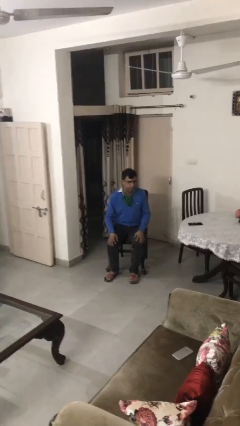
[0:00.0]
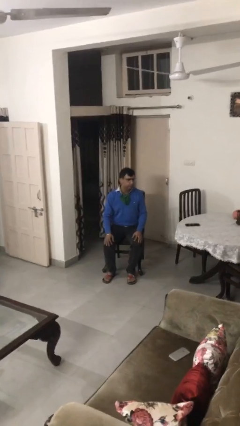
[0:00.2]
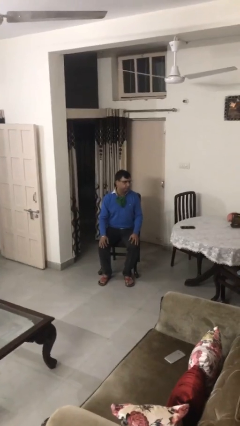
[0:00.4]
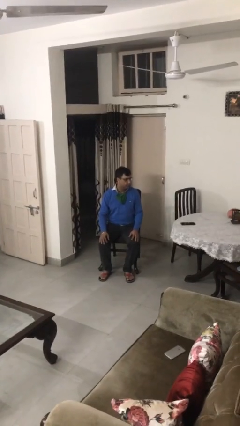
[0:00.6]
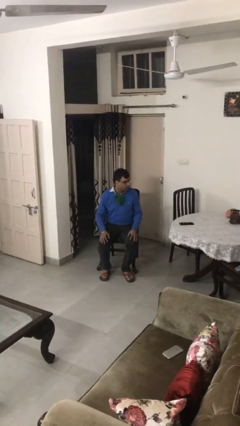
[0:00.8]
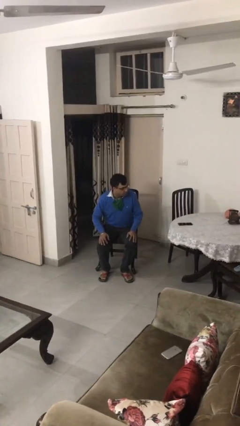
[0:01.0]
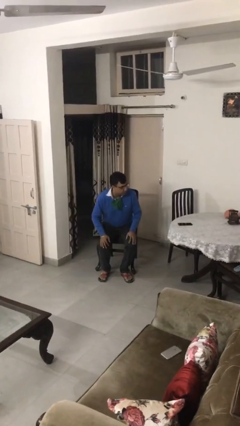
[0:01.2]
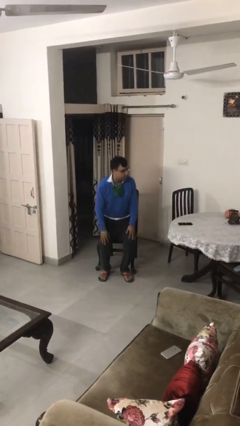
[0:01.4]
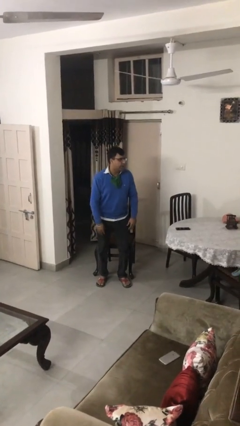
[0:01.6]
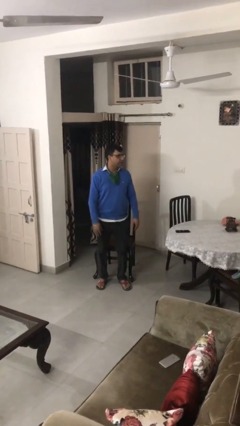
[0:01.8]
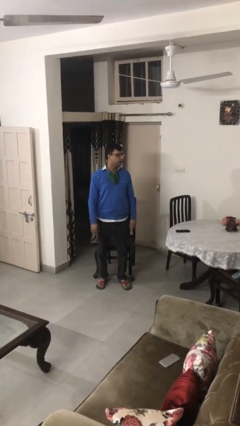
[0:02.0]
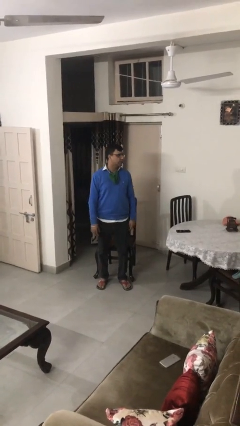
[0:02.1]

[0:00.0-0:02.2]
person stands up

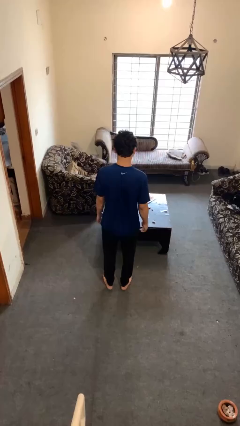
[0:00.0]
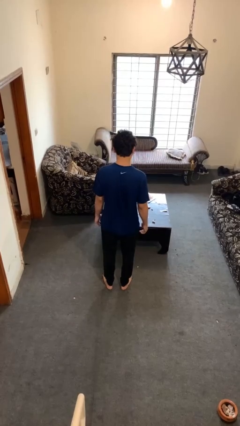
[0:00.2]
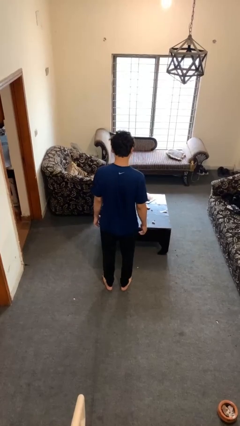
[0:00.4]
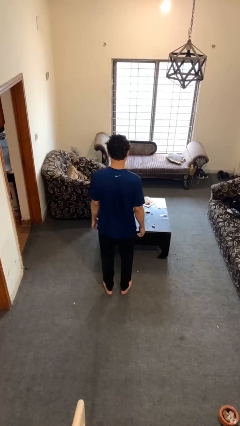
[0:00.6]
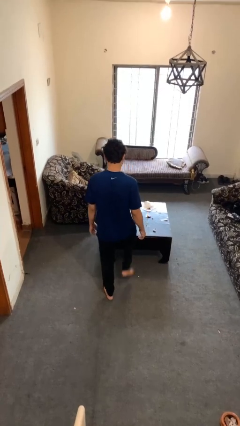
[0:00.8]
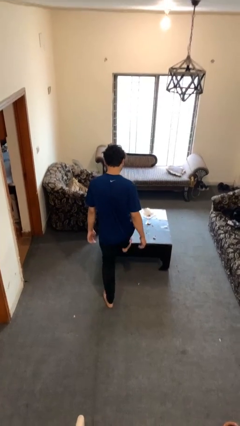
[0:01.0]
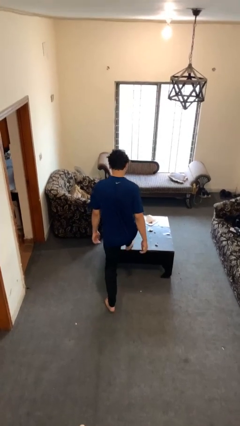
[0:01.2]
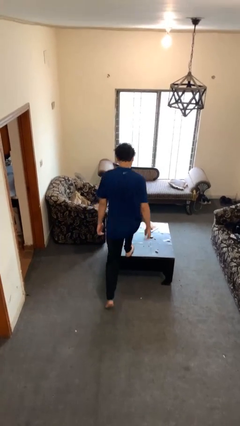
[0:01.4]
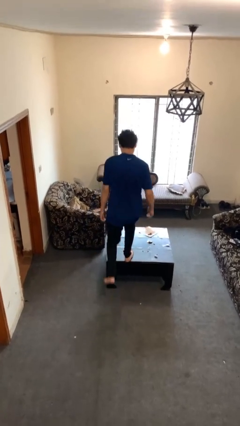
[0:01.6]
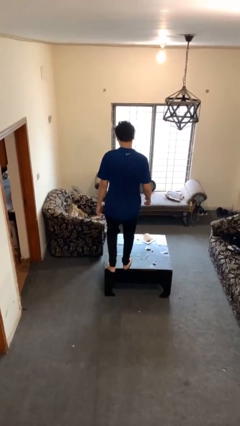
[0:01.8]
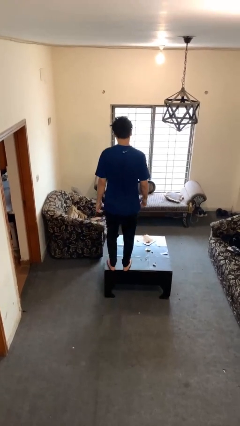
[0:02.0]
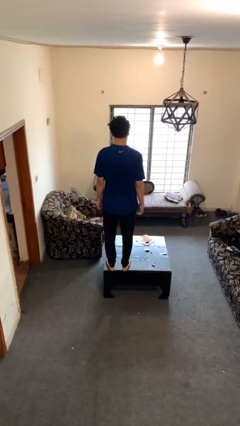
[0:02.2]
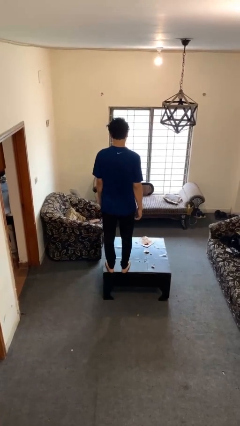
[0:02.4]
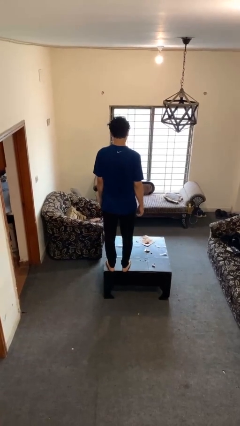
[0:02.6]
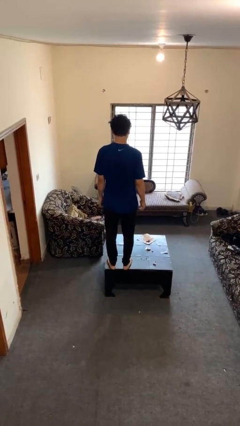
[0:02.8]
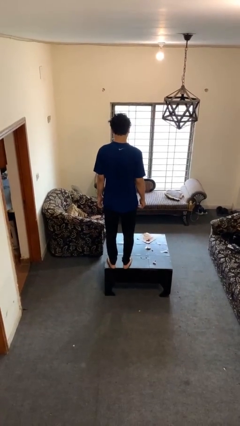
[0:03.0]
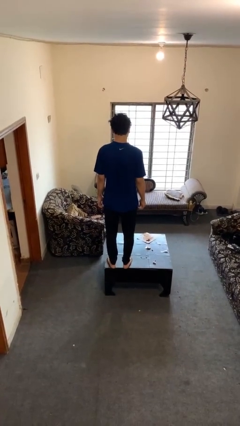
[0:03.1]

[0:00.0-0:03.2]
person climbs on table

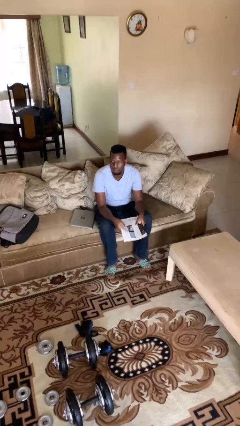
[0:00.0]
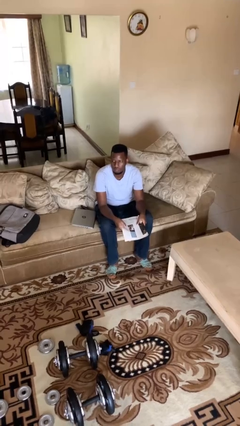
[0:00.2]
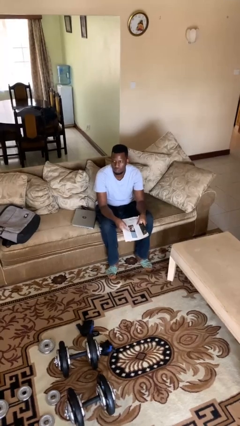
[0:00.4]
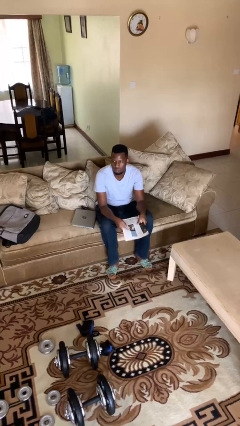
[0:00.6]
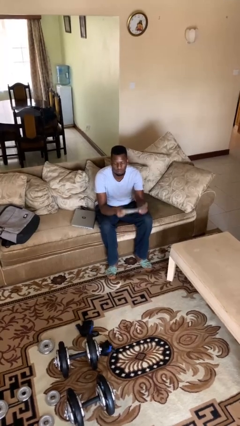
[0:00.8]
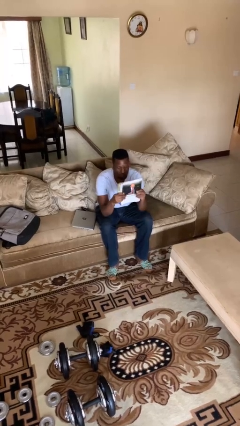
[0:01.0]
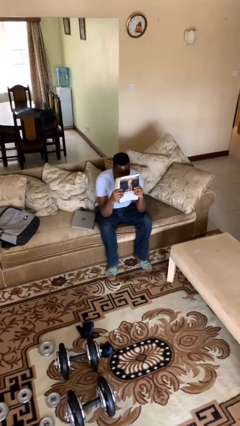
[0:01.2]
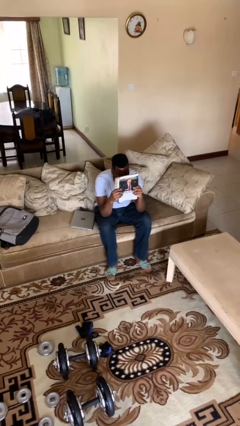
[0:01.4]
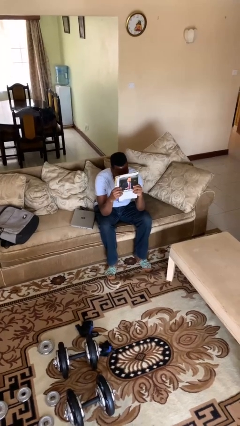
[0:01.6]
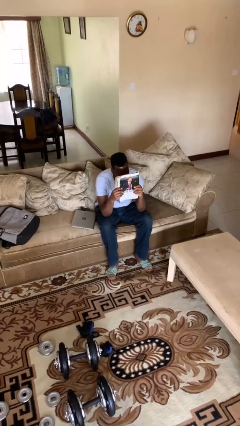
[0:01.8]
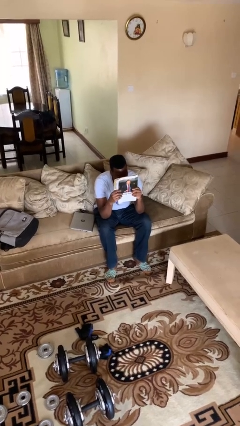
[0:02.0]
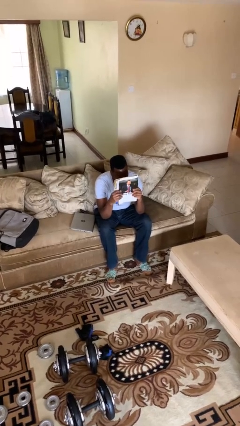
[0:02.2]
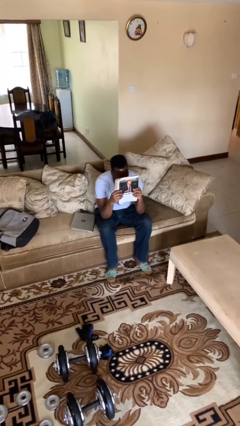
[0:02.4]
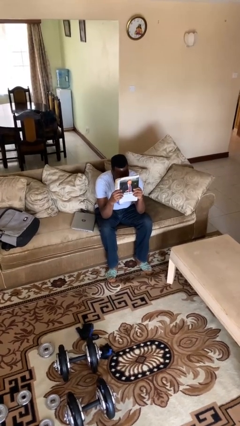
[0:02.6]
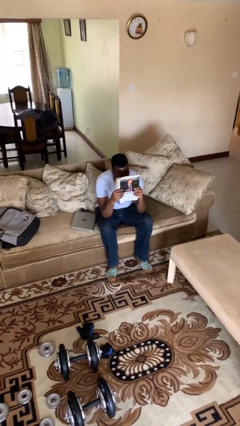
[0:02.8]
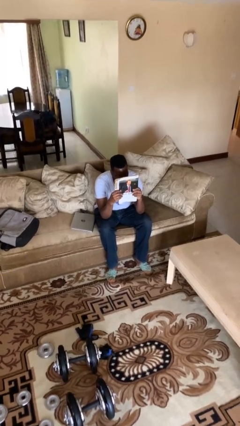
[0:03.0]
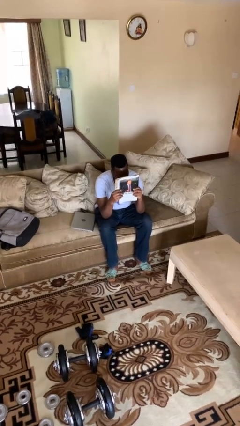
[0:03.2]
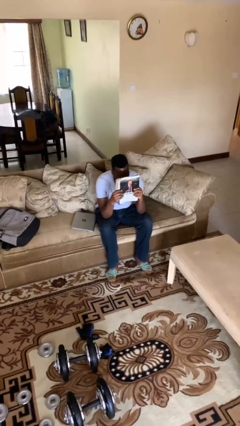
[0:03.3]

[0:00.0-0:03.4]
person reads document

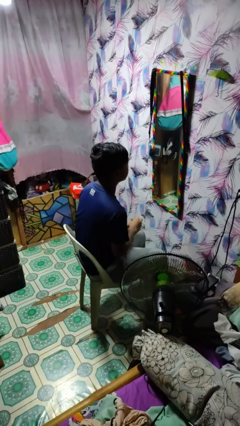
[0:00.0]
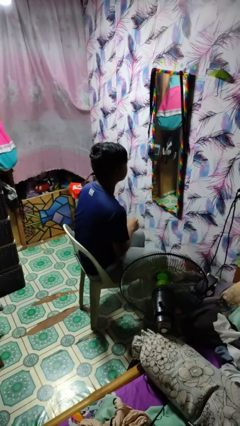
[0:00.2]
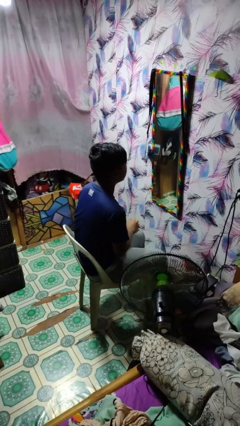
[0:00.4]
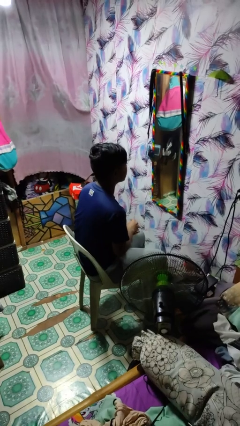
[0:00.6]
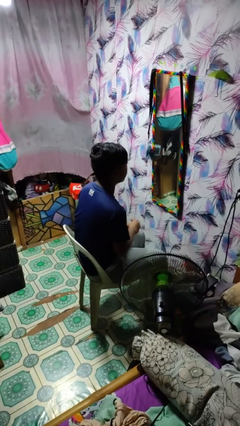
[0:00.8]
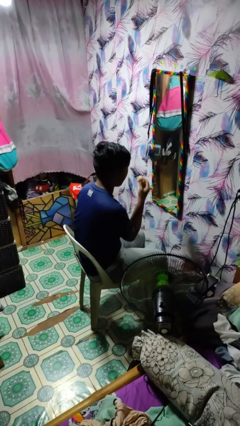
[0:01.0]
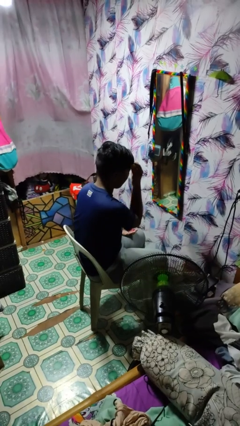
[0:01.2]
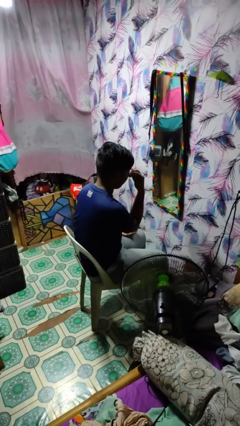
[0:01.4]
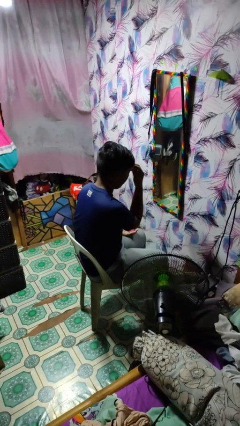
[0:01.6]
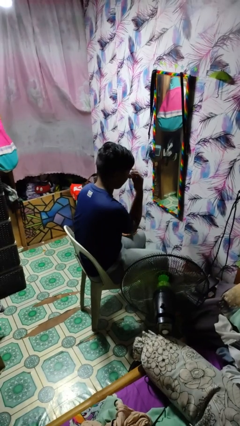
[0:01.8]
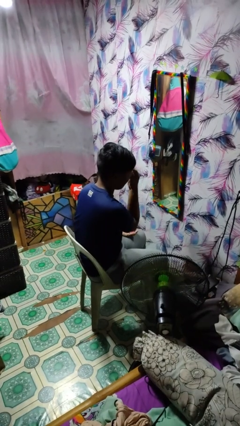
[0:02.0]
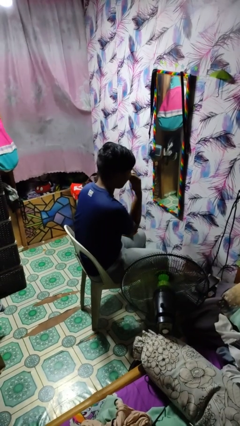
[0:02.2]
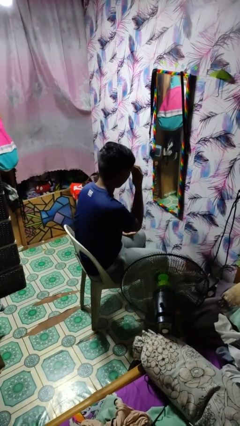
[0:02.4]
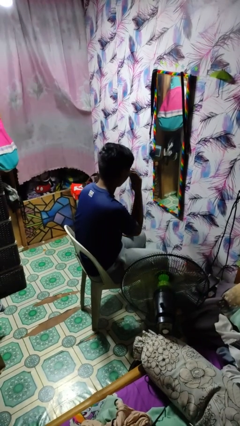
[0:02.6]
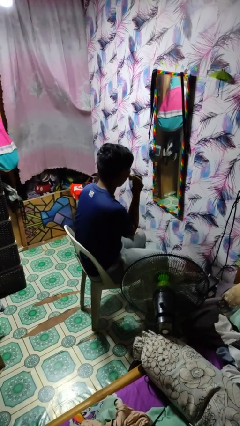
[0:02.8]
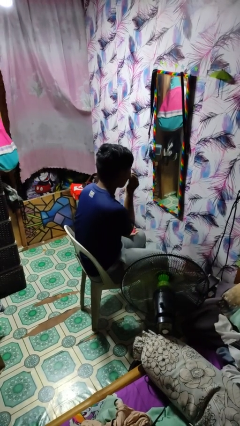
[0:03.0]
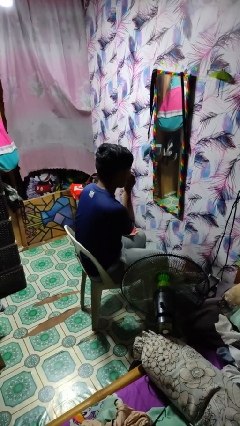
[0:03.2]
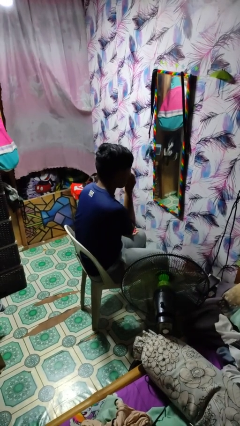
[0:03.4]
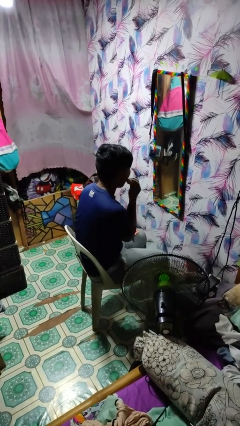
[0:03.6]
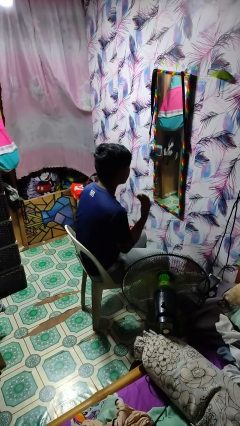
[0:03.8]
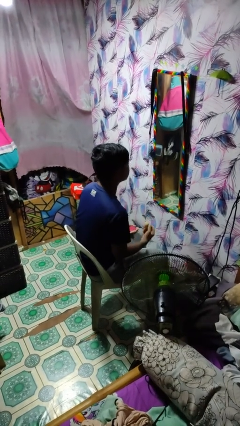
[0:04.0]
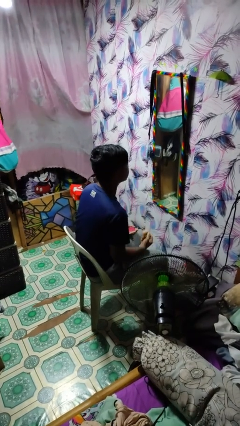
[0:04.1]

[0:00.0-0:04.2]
person applies foundation makeup

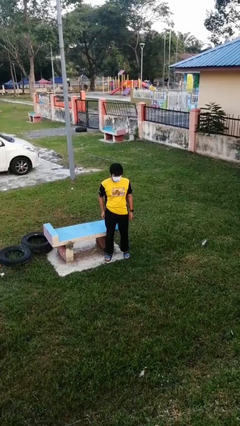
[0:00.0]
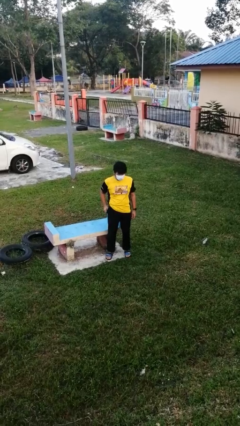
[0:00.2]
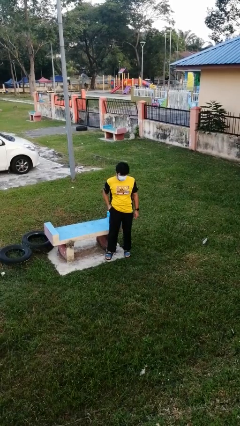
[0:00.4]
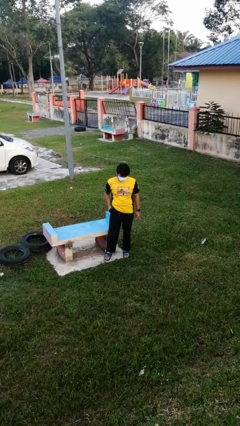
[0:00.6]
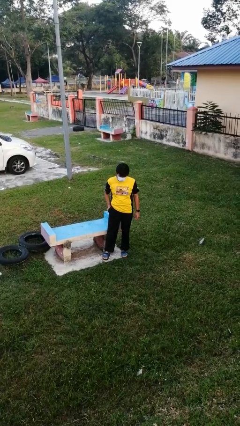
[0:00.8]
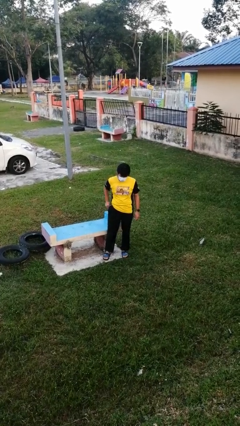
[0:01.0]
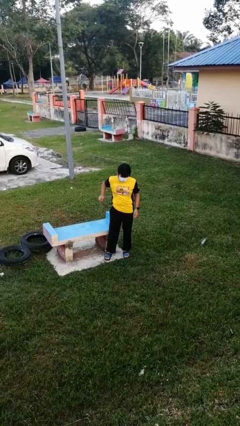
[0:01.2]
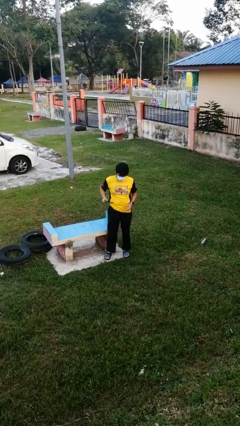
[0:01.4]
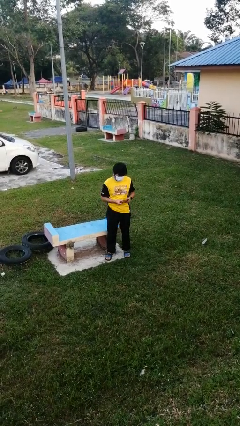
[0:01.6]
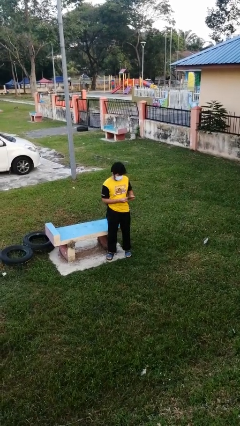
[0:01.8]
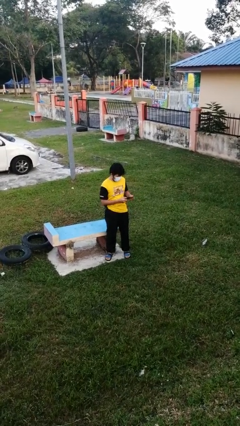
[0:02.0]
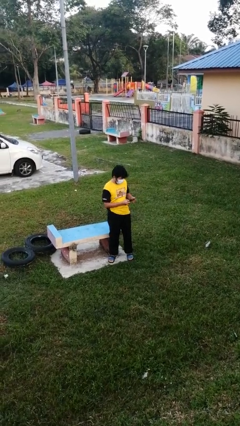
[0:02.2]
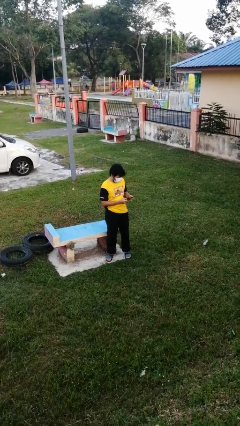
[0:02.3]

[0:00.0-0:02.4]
person takes phone from pocket

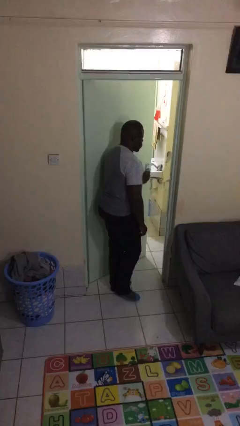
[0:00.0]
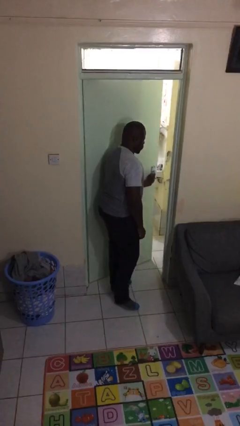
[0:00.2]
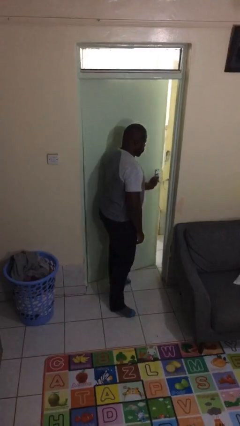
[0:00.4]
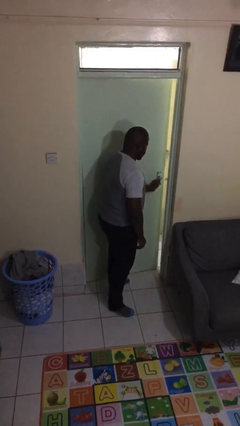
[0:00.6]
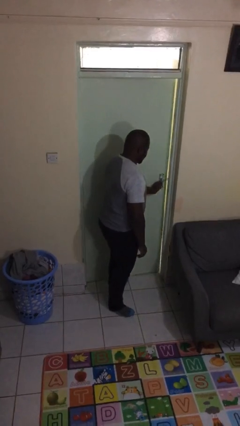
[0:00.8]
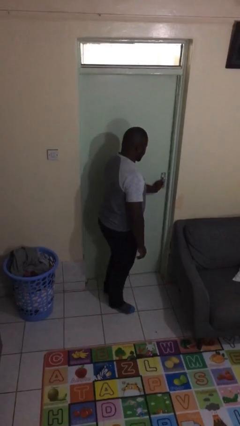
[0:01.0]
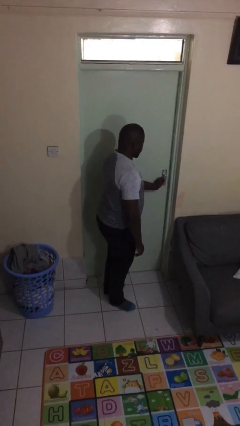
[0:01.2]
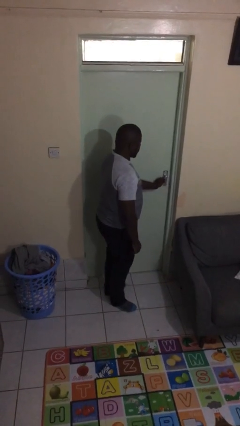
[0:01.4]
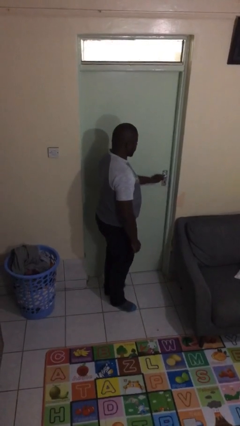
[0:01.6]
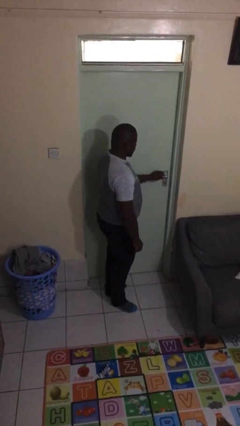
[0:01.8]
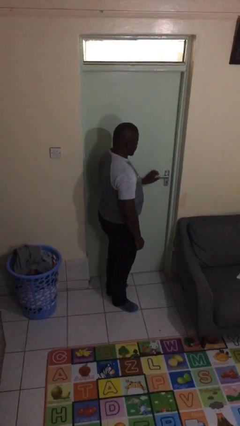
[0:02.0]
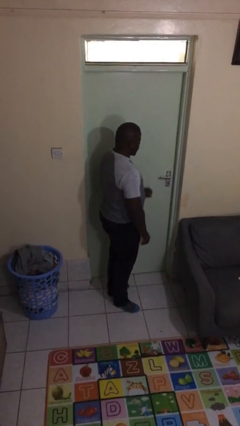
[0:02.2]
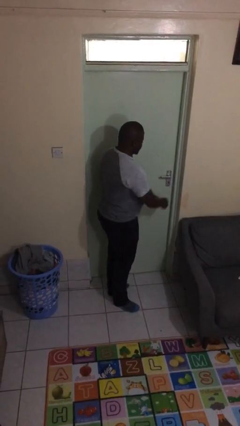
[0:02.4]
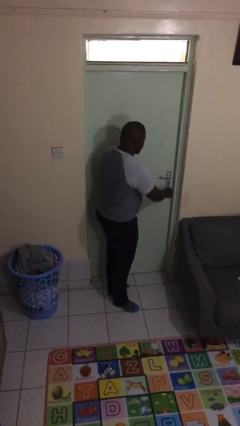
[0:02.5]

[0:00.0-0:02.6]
person closes facility door
